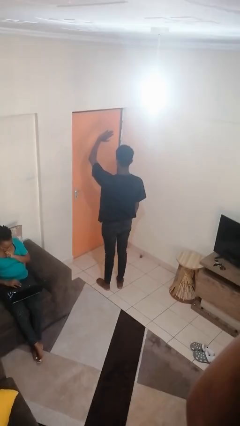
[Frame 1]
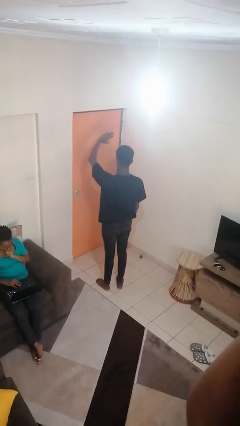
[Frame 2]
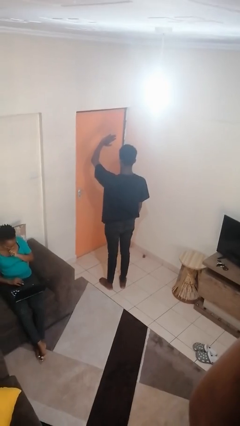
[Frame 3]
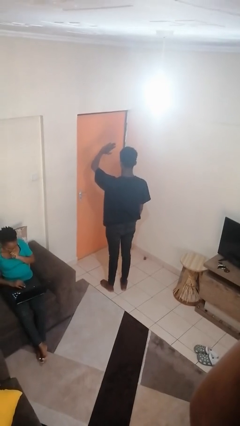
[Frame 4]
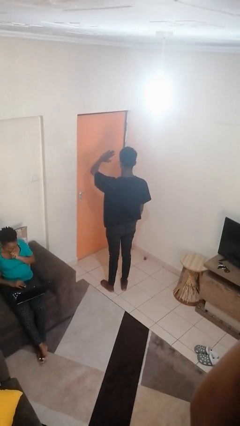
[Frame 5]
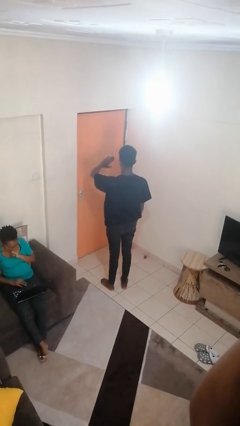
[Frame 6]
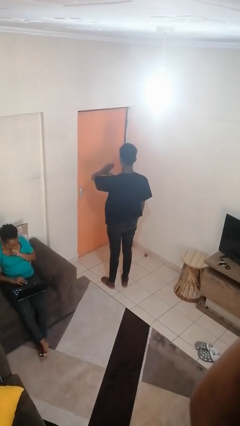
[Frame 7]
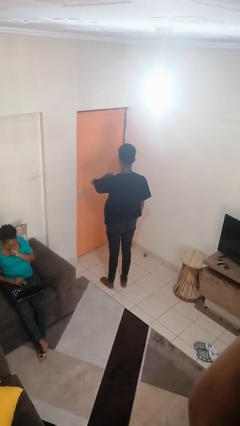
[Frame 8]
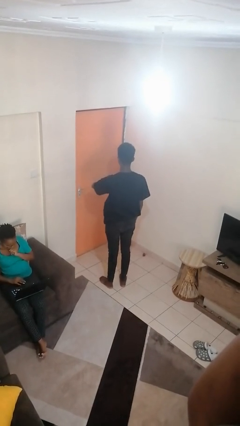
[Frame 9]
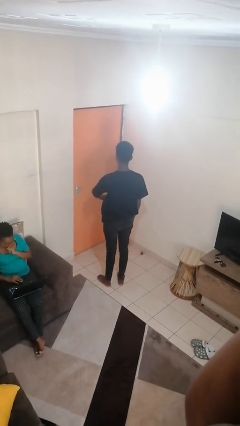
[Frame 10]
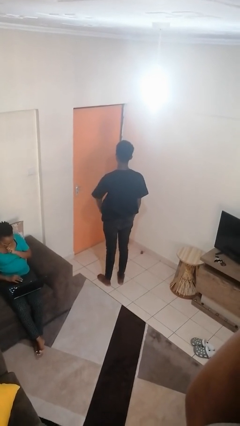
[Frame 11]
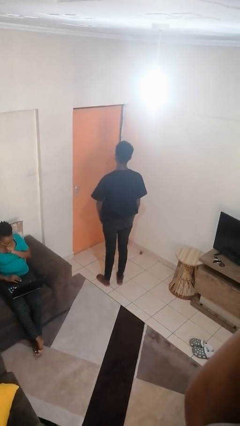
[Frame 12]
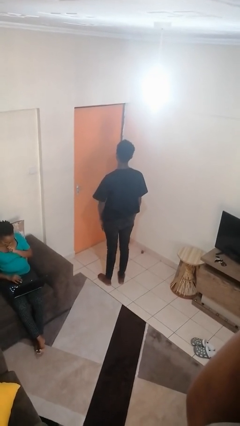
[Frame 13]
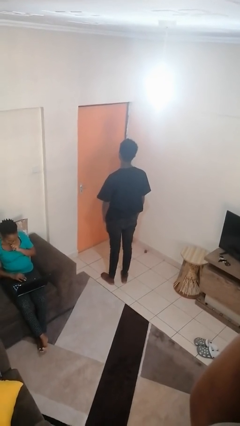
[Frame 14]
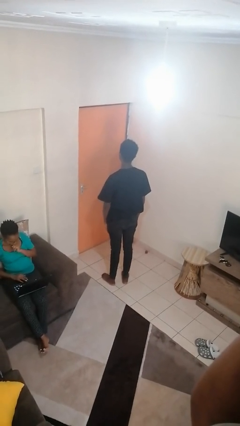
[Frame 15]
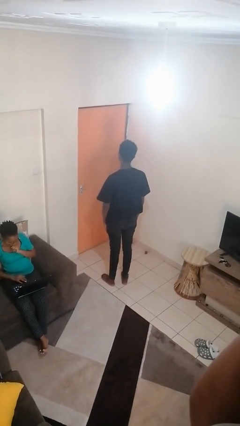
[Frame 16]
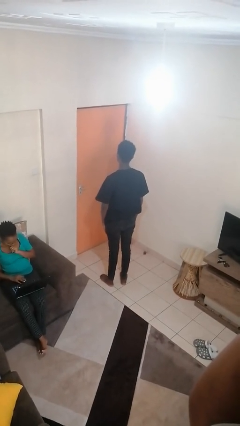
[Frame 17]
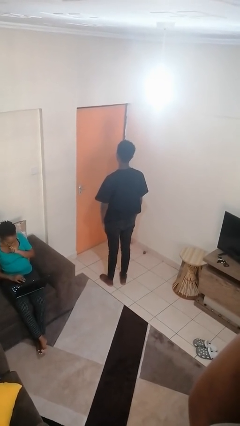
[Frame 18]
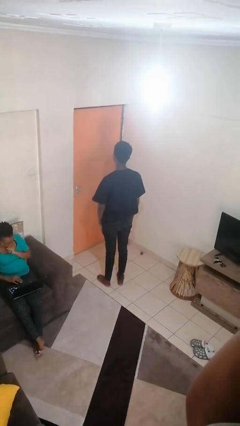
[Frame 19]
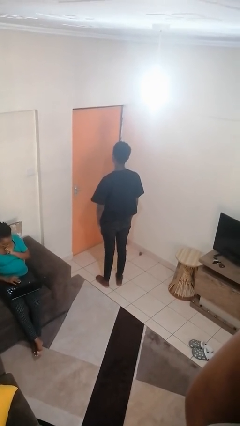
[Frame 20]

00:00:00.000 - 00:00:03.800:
person gestures swipe down

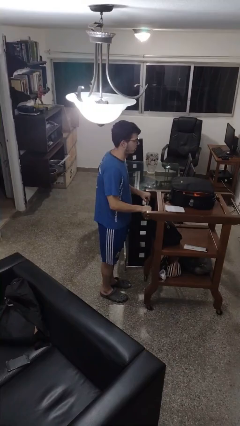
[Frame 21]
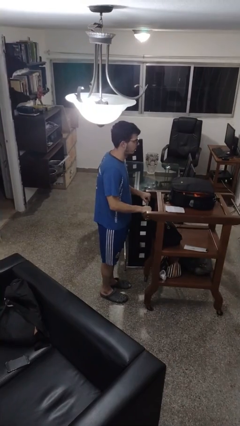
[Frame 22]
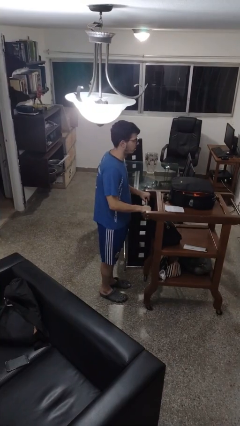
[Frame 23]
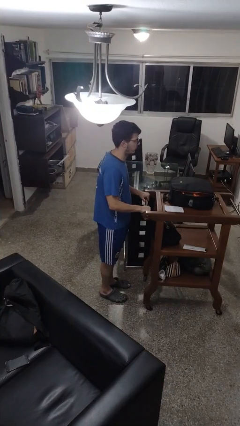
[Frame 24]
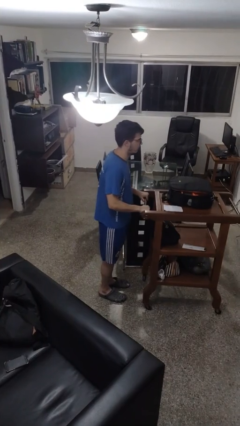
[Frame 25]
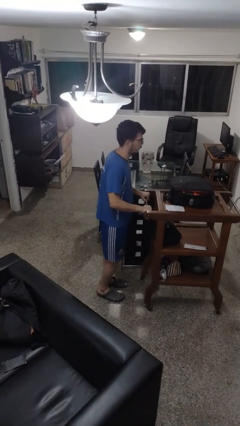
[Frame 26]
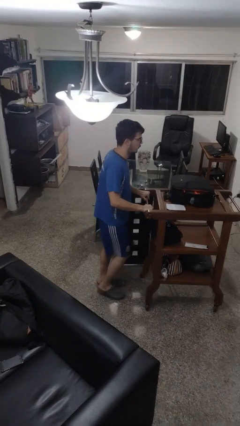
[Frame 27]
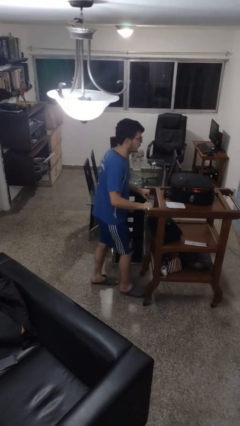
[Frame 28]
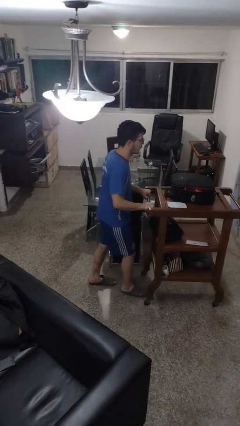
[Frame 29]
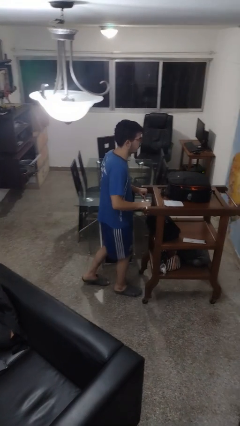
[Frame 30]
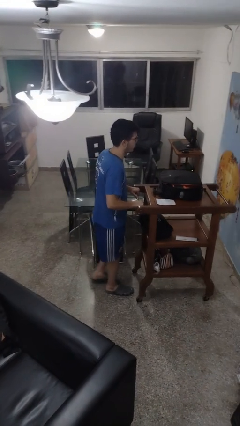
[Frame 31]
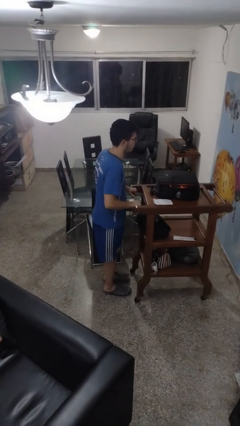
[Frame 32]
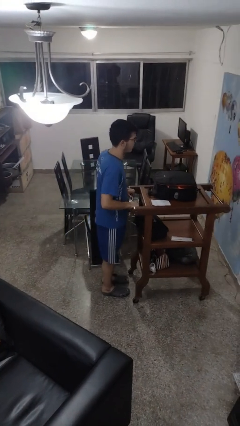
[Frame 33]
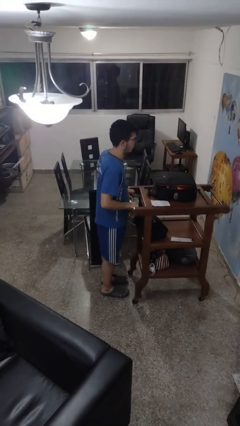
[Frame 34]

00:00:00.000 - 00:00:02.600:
person pushes wheeled cart

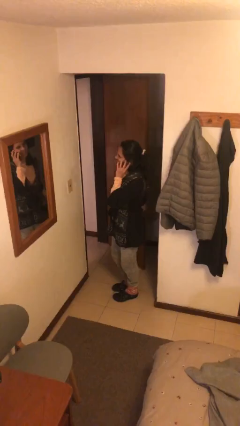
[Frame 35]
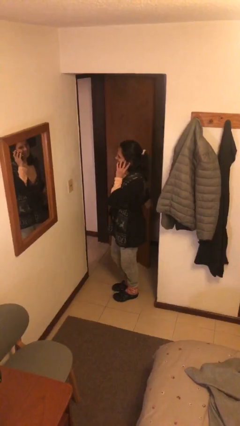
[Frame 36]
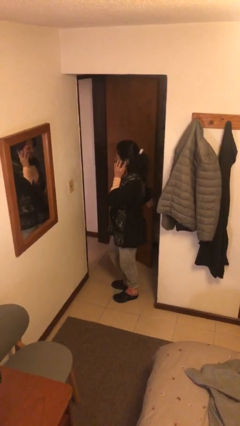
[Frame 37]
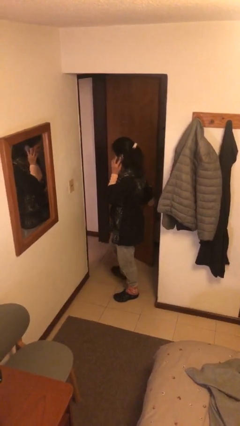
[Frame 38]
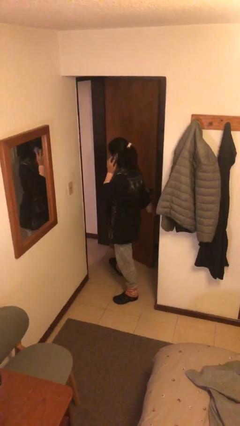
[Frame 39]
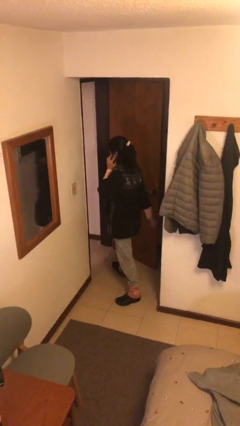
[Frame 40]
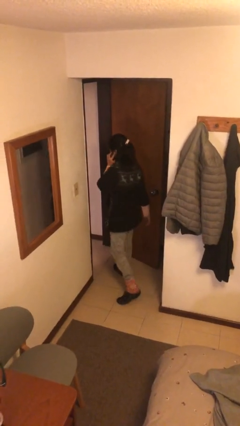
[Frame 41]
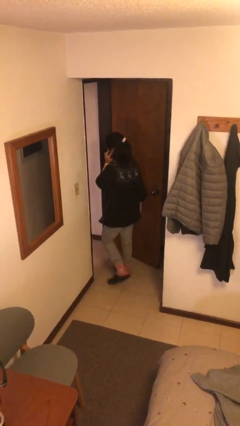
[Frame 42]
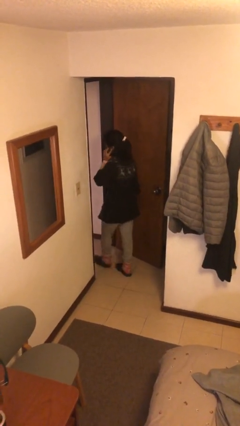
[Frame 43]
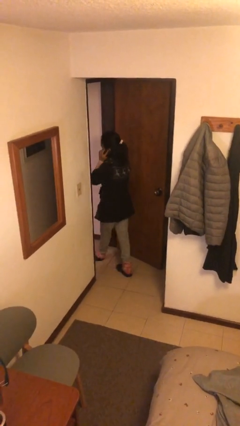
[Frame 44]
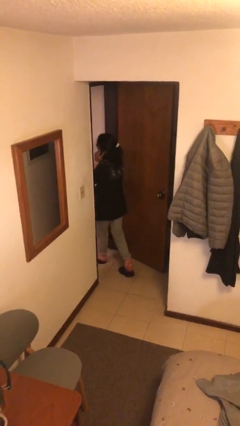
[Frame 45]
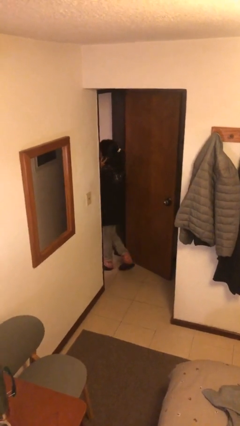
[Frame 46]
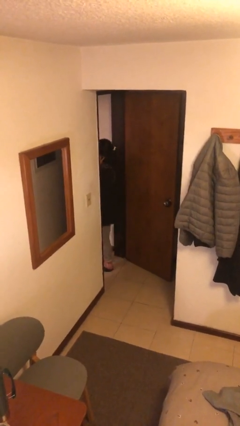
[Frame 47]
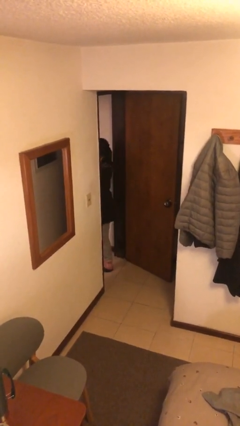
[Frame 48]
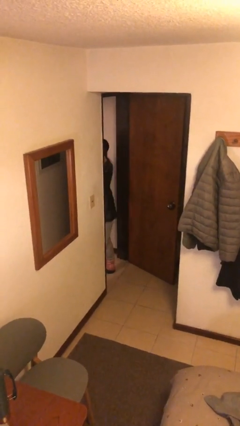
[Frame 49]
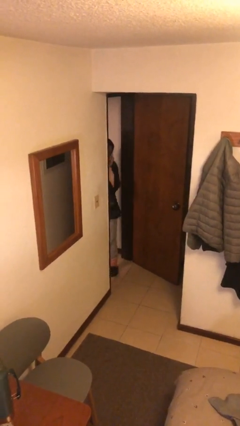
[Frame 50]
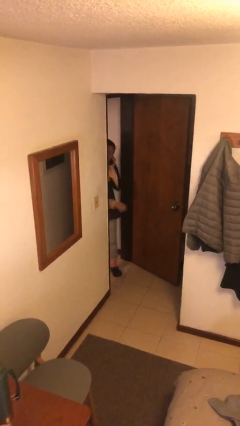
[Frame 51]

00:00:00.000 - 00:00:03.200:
person exits scene through structure

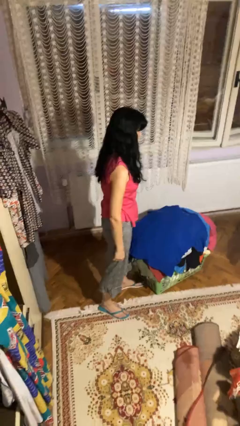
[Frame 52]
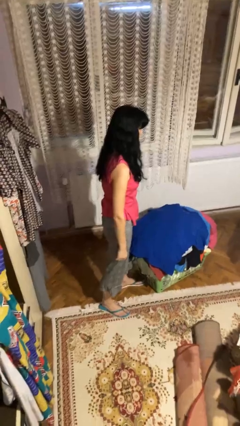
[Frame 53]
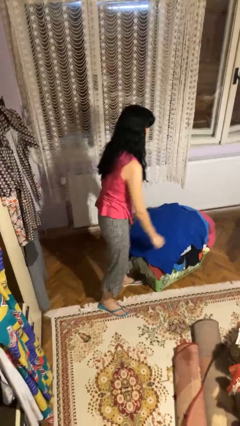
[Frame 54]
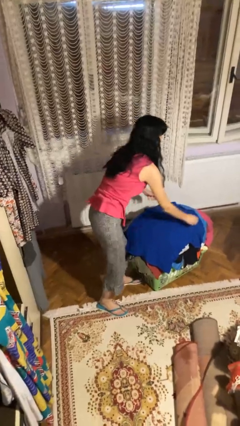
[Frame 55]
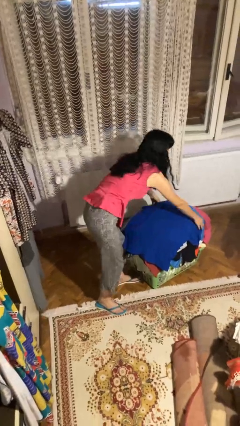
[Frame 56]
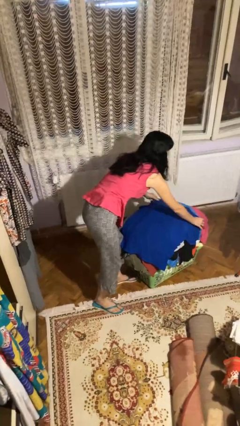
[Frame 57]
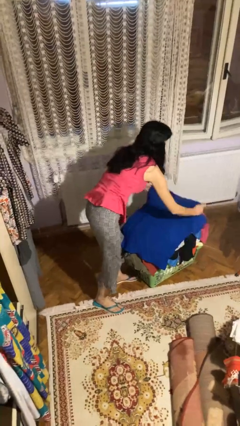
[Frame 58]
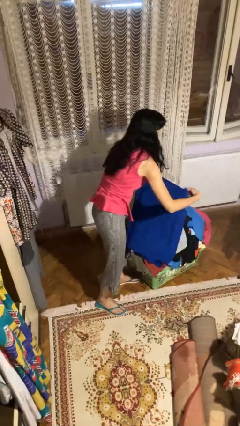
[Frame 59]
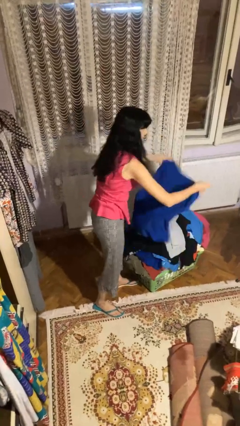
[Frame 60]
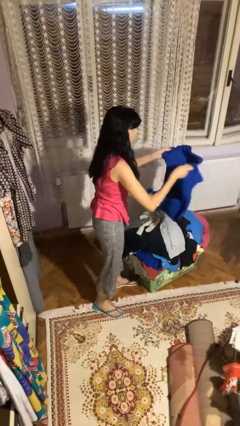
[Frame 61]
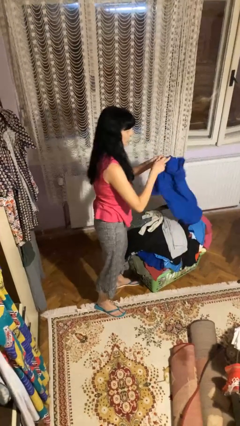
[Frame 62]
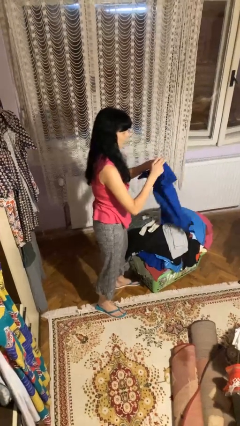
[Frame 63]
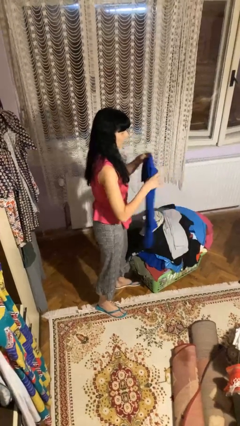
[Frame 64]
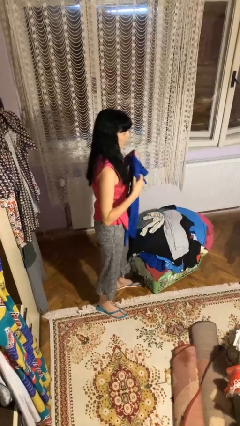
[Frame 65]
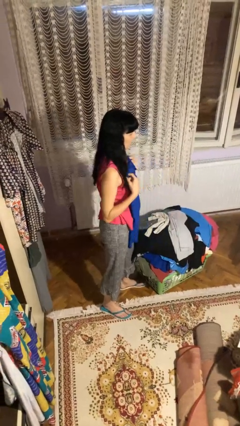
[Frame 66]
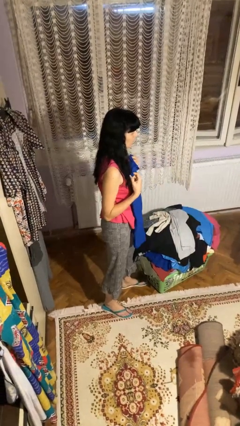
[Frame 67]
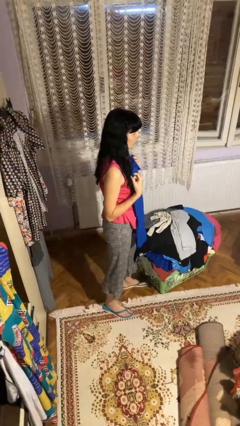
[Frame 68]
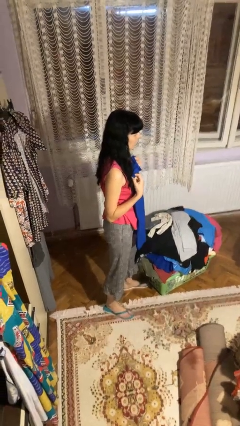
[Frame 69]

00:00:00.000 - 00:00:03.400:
person folds shirt

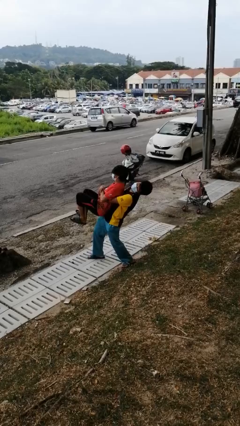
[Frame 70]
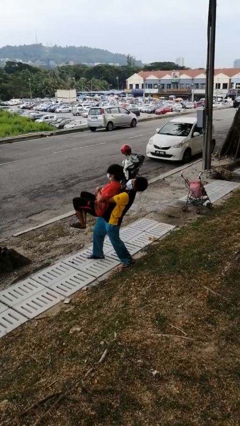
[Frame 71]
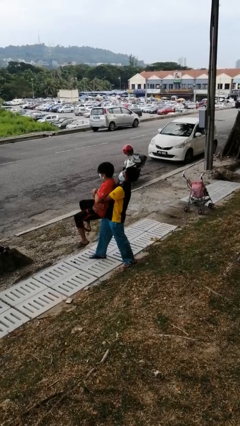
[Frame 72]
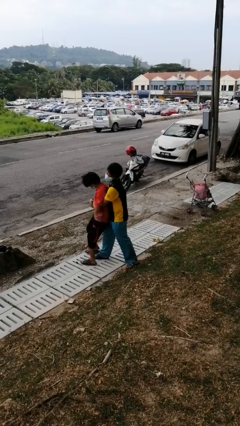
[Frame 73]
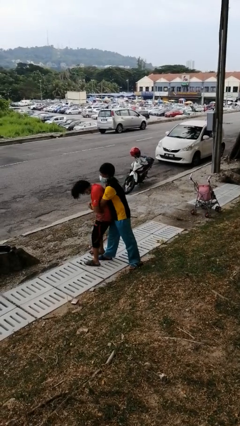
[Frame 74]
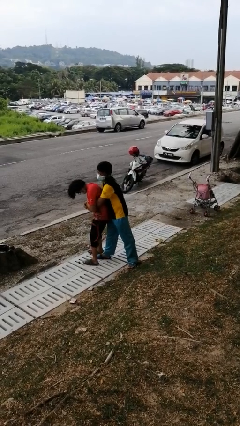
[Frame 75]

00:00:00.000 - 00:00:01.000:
person puts down person

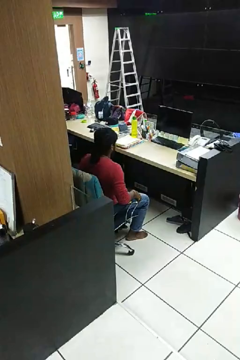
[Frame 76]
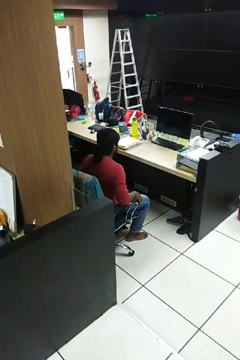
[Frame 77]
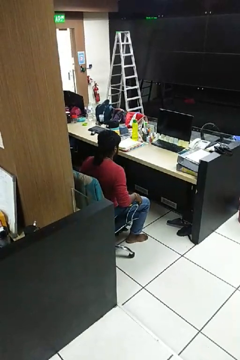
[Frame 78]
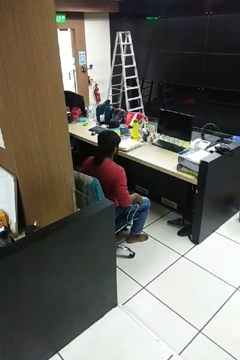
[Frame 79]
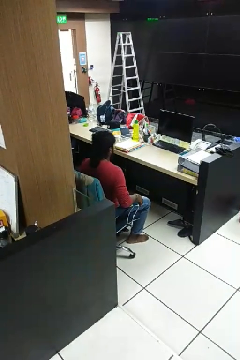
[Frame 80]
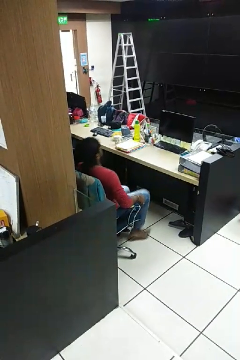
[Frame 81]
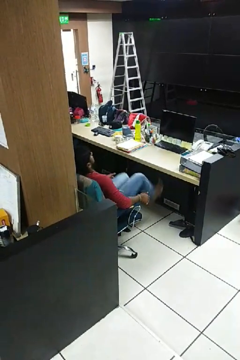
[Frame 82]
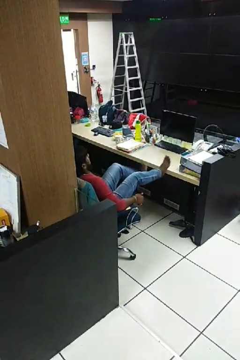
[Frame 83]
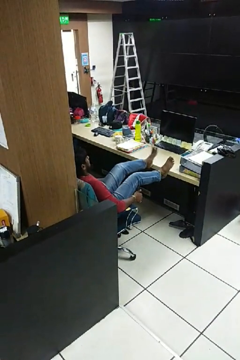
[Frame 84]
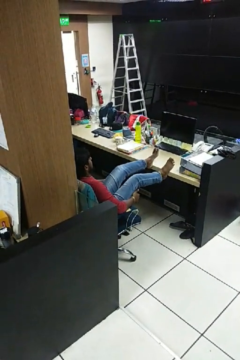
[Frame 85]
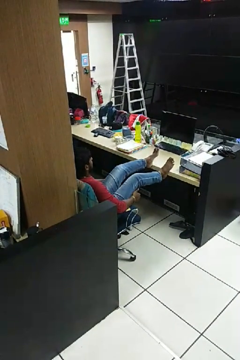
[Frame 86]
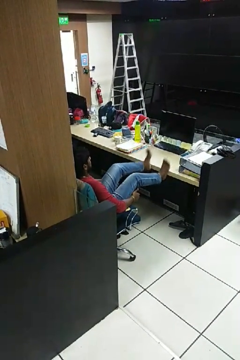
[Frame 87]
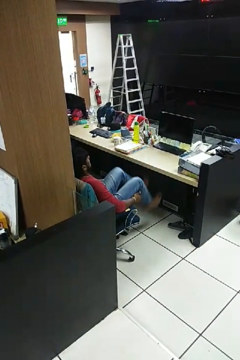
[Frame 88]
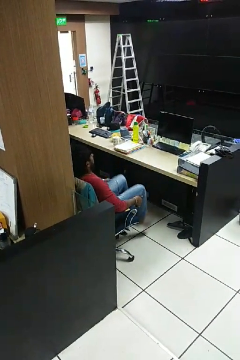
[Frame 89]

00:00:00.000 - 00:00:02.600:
person puts feet up

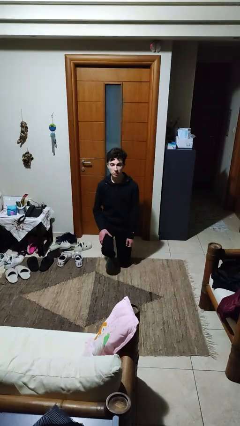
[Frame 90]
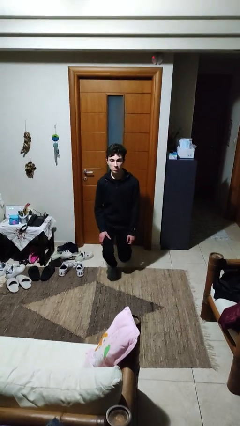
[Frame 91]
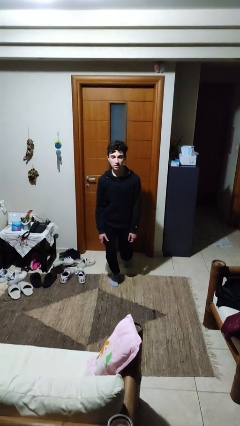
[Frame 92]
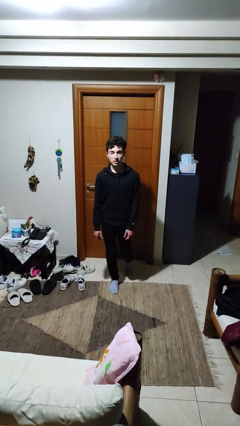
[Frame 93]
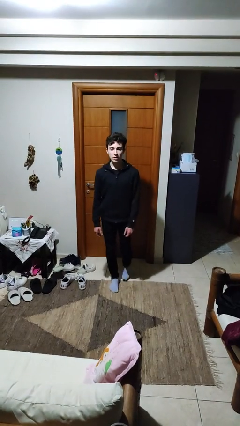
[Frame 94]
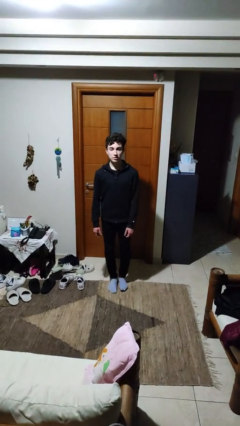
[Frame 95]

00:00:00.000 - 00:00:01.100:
person stands up from floor

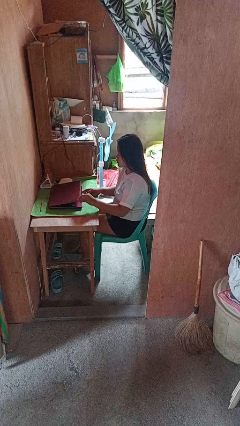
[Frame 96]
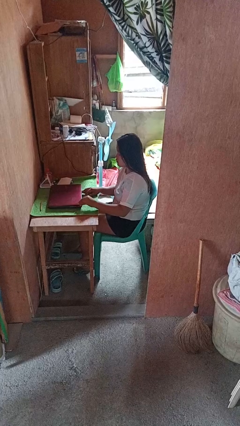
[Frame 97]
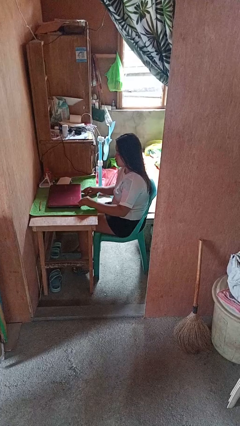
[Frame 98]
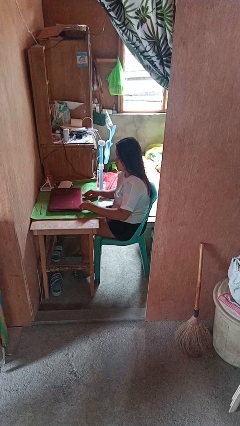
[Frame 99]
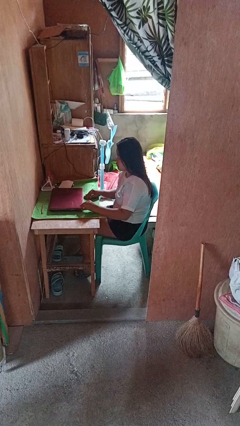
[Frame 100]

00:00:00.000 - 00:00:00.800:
person closes laptop
